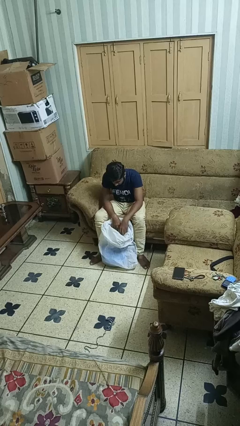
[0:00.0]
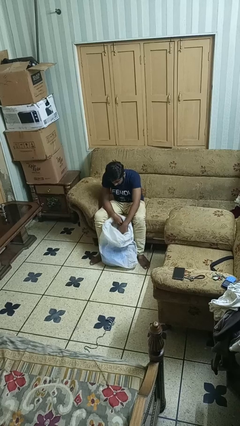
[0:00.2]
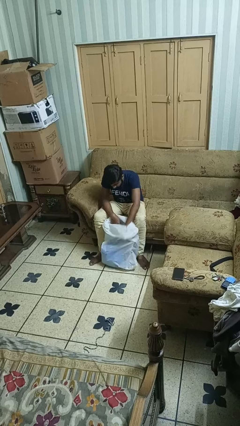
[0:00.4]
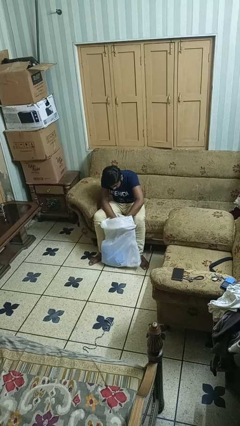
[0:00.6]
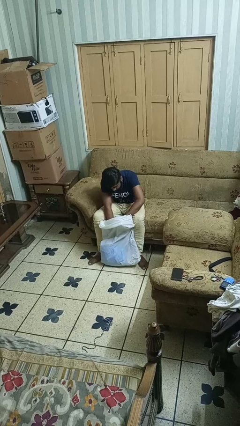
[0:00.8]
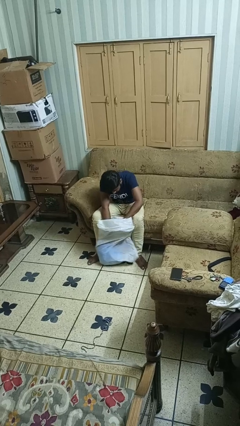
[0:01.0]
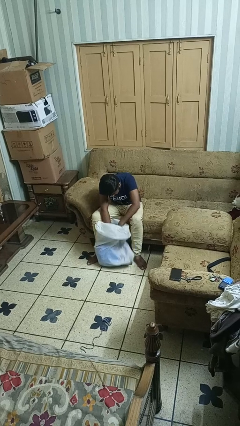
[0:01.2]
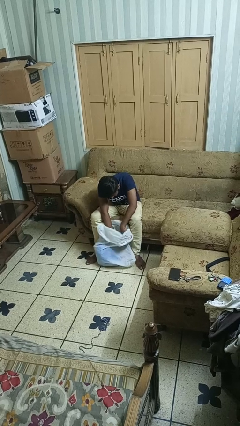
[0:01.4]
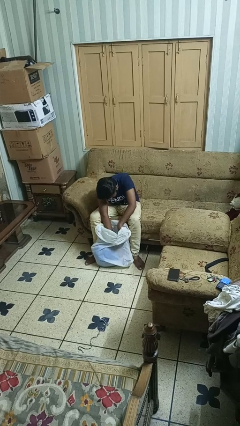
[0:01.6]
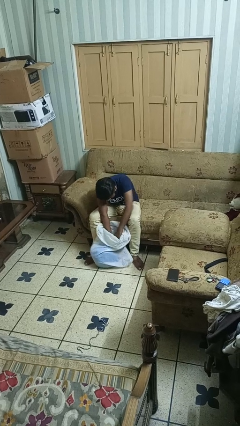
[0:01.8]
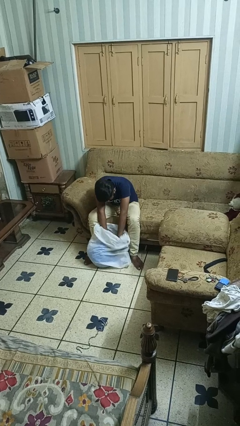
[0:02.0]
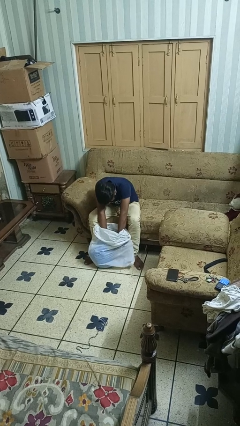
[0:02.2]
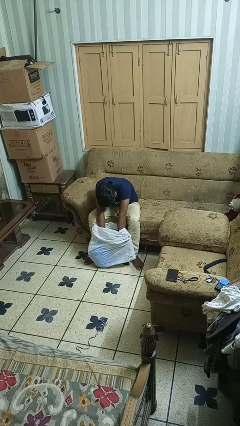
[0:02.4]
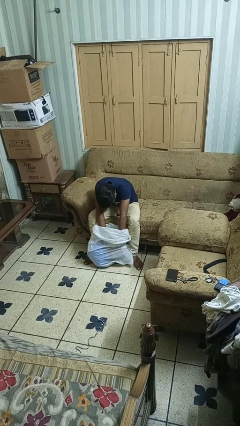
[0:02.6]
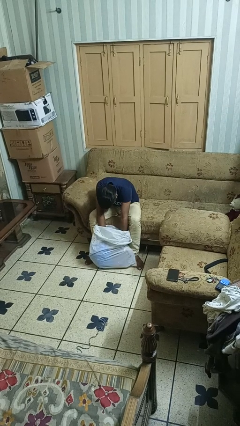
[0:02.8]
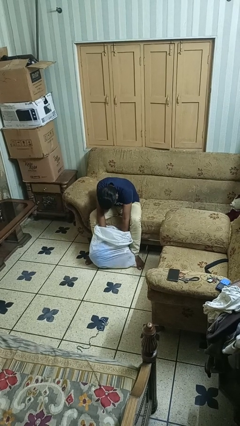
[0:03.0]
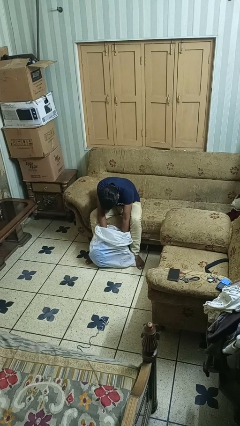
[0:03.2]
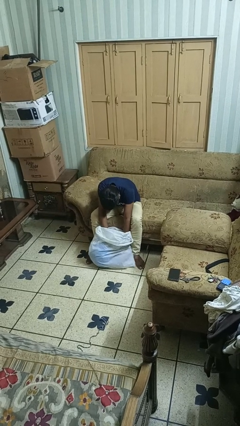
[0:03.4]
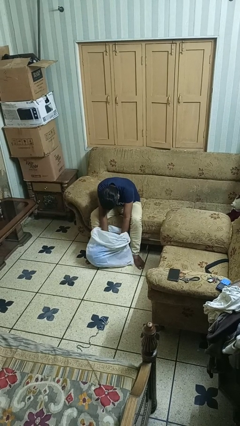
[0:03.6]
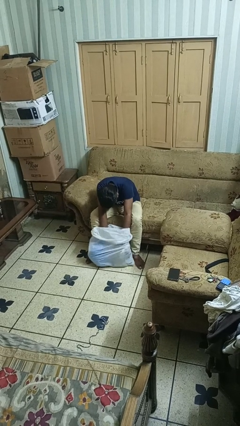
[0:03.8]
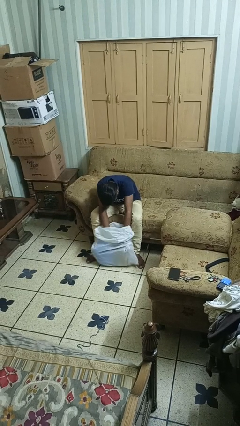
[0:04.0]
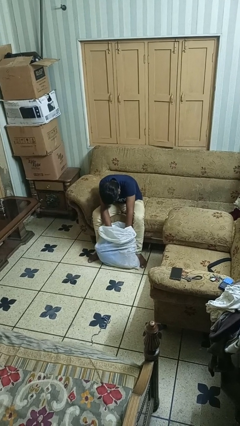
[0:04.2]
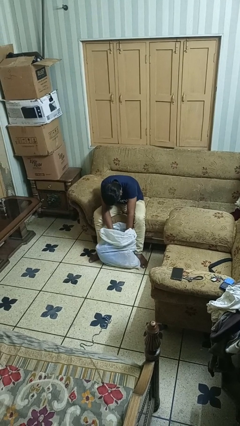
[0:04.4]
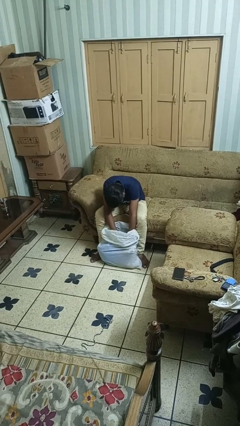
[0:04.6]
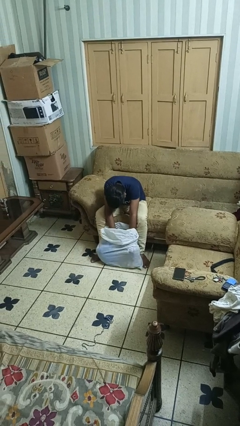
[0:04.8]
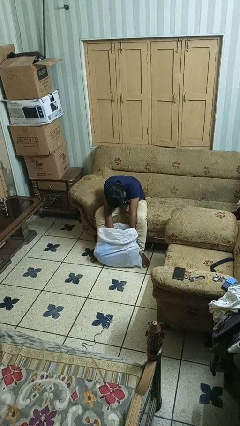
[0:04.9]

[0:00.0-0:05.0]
person searches in bag

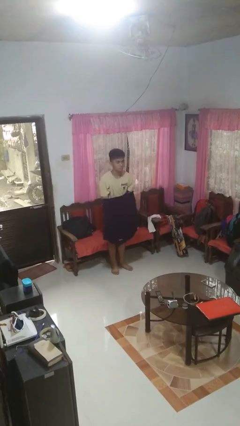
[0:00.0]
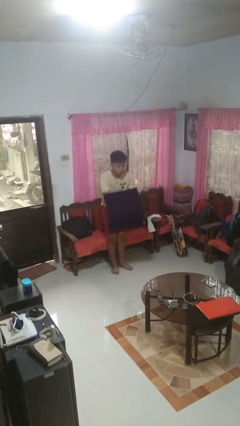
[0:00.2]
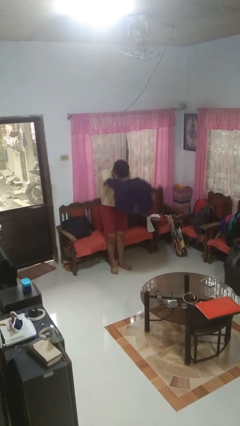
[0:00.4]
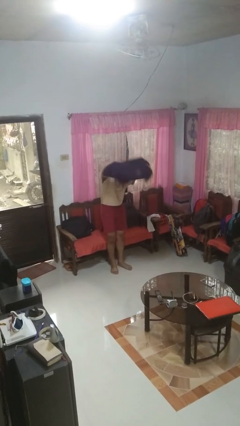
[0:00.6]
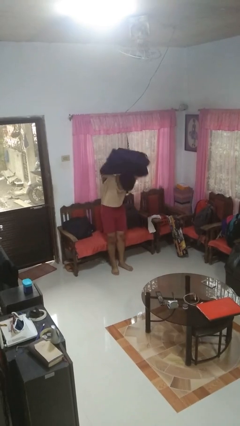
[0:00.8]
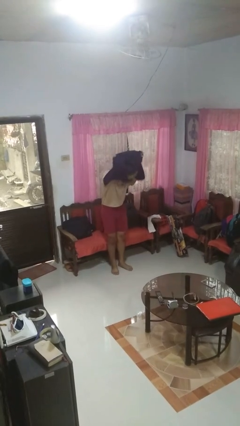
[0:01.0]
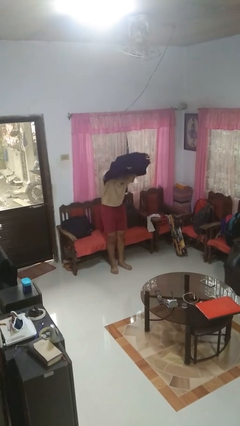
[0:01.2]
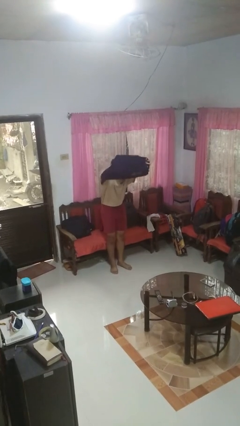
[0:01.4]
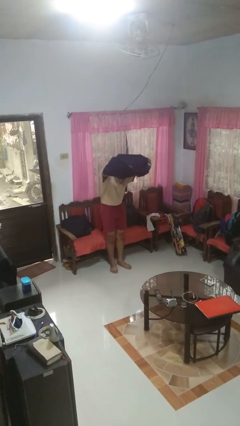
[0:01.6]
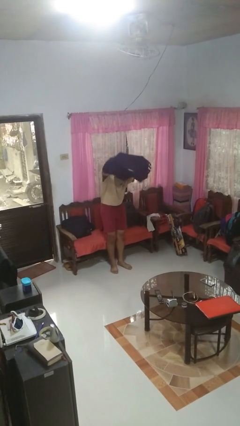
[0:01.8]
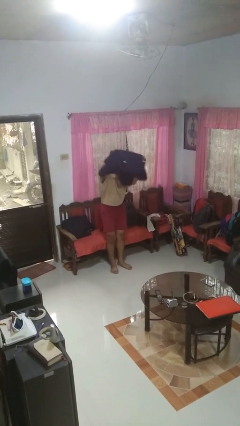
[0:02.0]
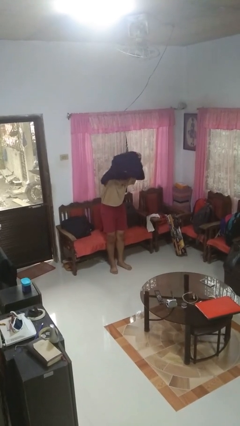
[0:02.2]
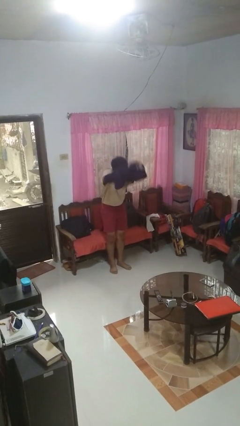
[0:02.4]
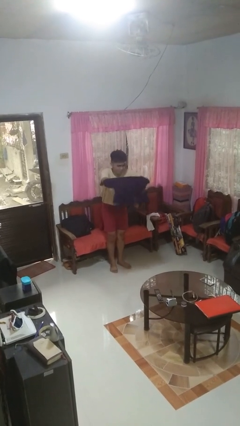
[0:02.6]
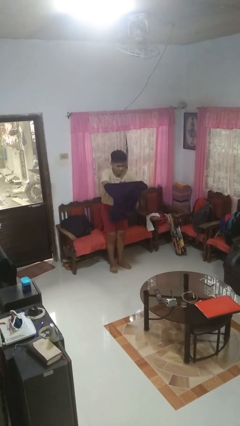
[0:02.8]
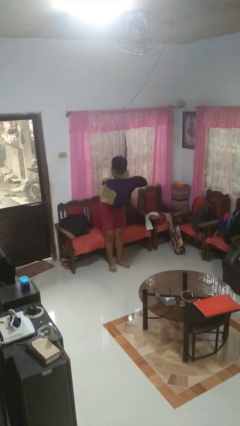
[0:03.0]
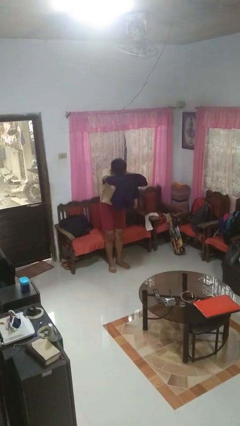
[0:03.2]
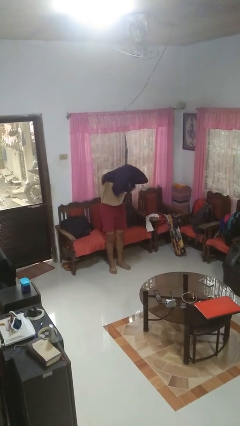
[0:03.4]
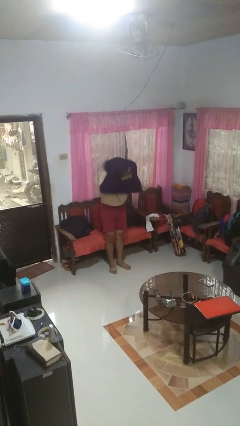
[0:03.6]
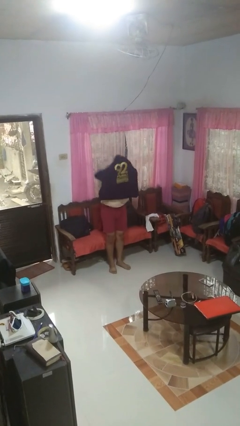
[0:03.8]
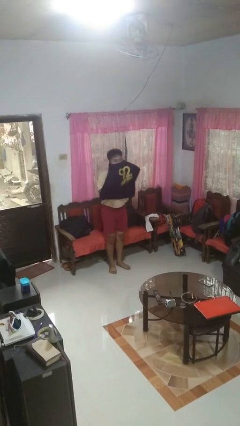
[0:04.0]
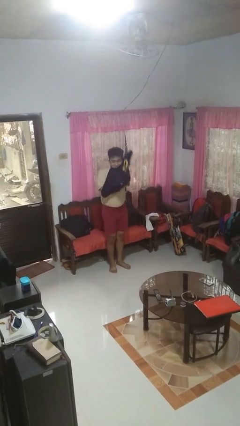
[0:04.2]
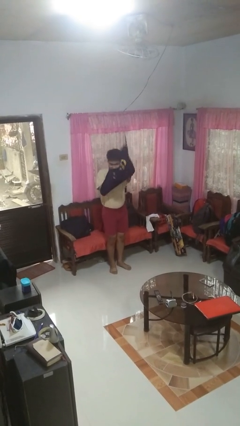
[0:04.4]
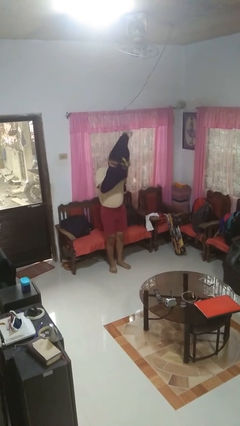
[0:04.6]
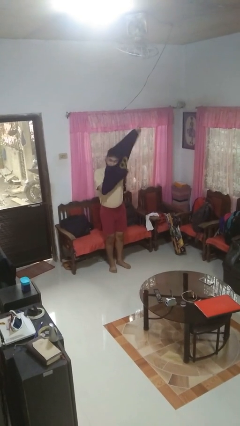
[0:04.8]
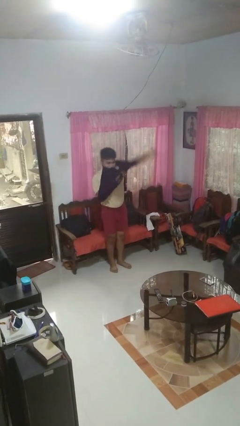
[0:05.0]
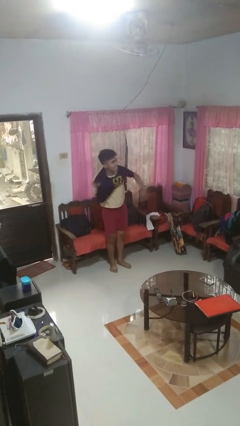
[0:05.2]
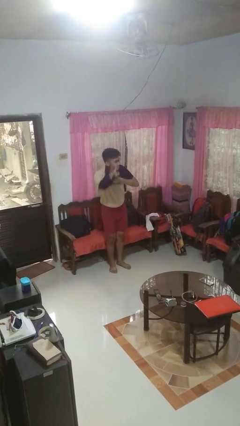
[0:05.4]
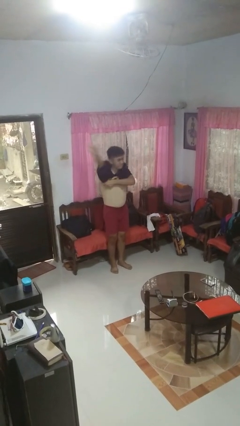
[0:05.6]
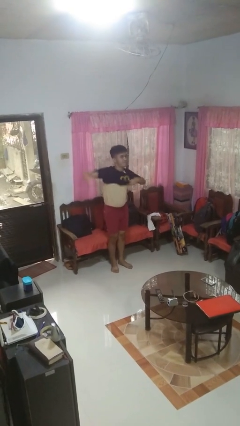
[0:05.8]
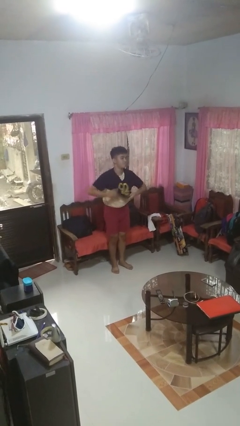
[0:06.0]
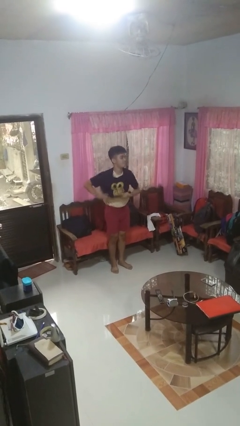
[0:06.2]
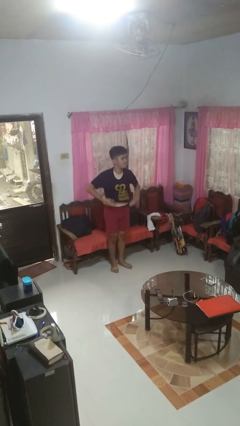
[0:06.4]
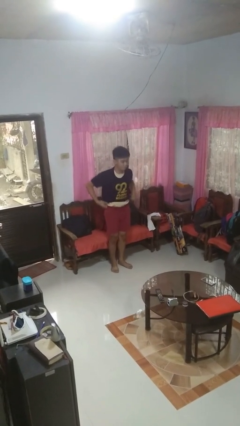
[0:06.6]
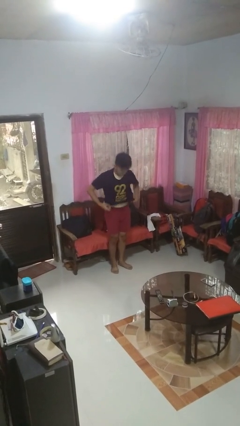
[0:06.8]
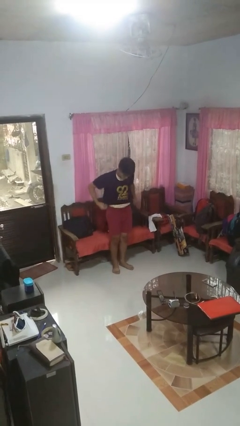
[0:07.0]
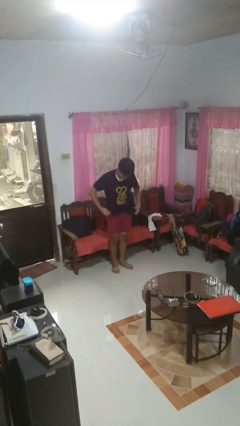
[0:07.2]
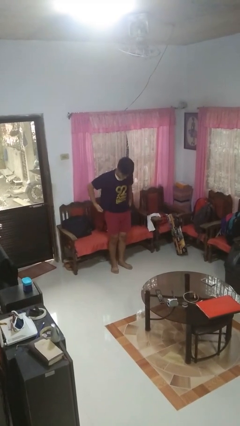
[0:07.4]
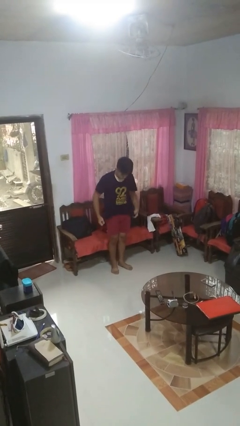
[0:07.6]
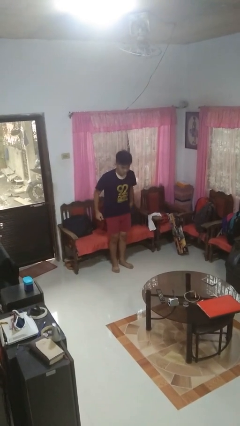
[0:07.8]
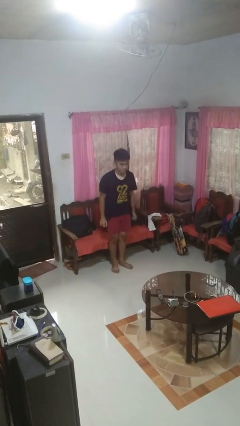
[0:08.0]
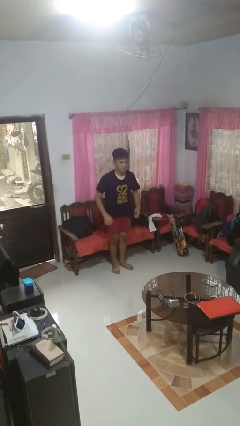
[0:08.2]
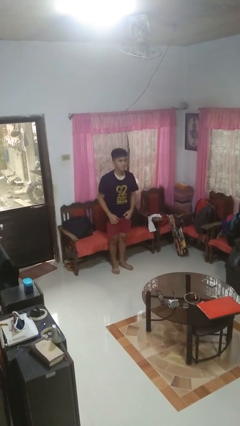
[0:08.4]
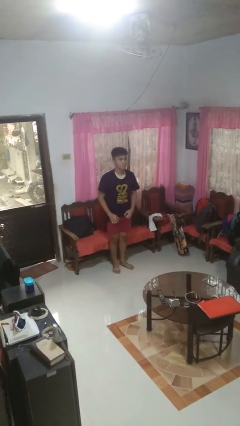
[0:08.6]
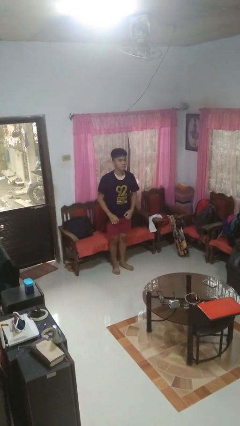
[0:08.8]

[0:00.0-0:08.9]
person puts on shirt

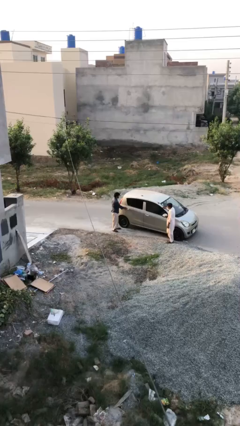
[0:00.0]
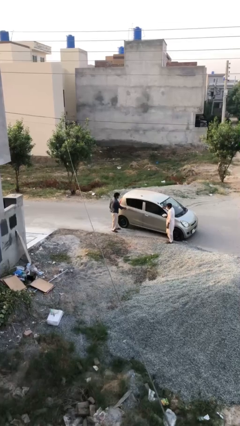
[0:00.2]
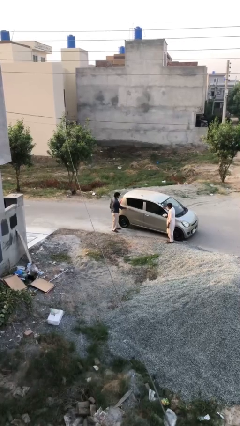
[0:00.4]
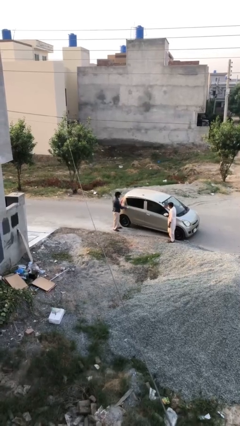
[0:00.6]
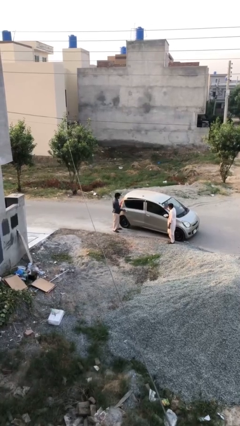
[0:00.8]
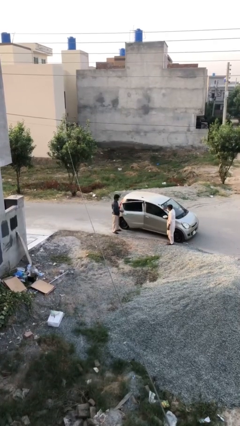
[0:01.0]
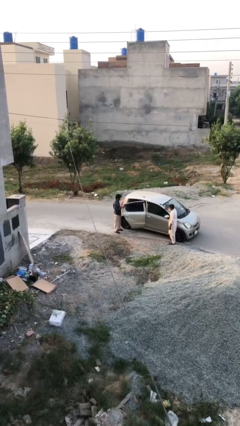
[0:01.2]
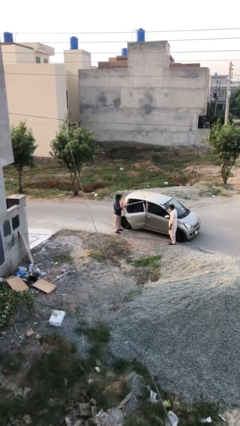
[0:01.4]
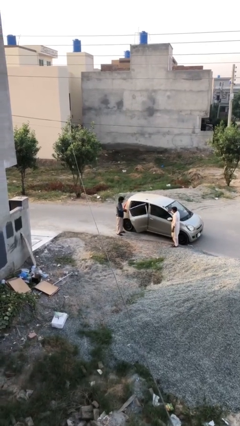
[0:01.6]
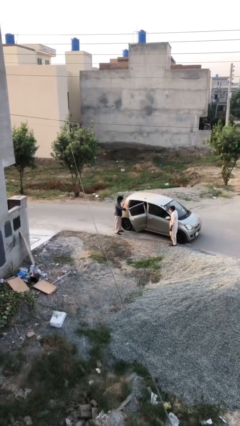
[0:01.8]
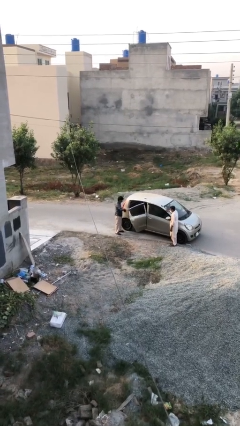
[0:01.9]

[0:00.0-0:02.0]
person opens car door

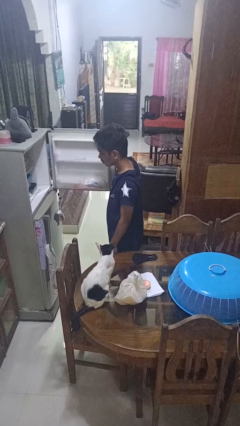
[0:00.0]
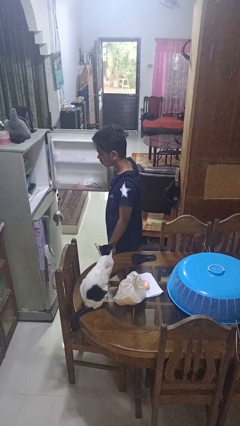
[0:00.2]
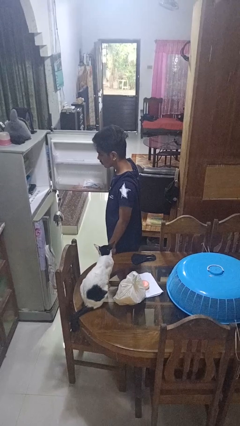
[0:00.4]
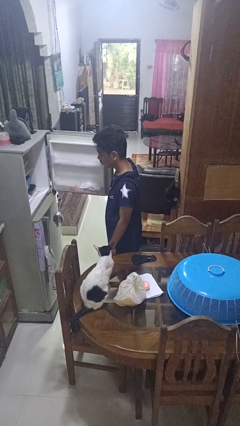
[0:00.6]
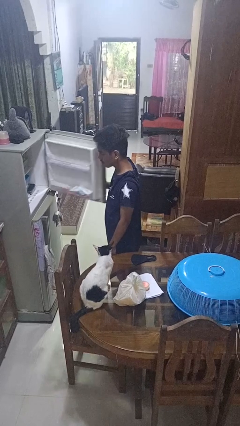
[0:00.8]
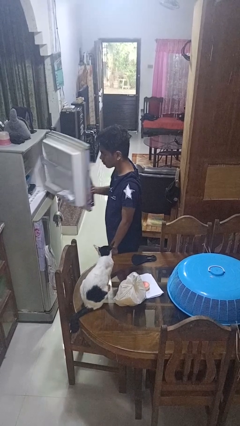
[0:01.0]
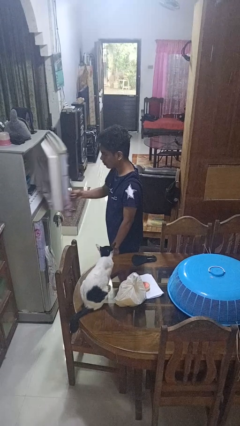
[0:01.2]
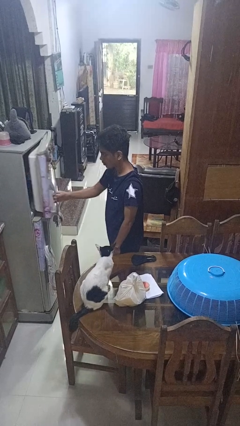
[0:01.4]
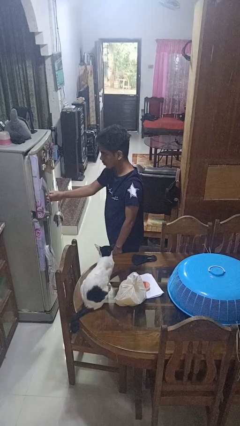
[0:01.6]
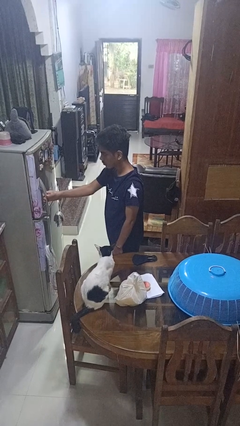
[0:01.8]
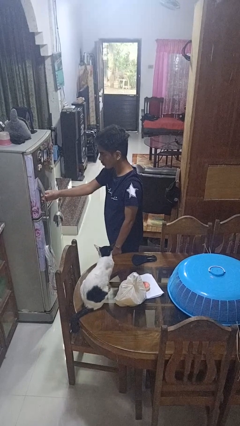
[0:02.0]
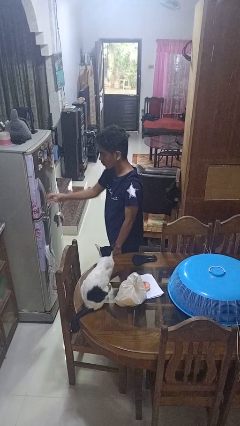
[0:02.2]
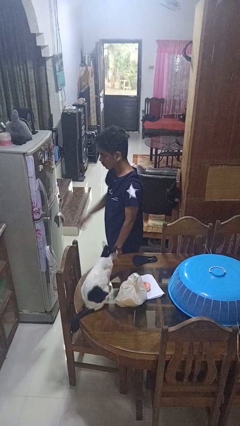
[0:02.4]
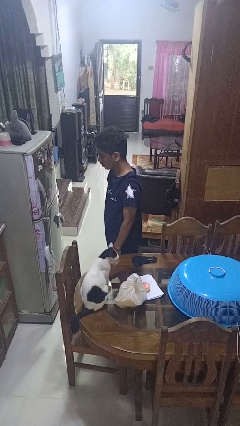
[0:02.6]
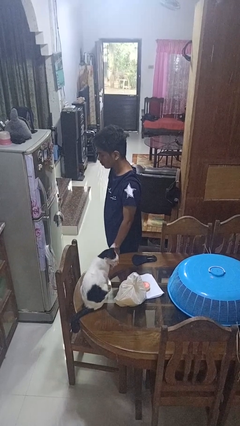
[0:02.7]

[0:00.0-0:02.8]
person closes refrigerator
